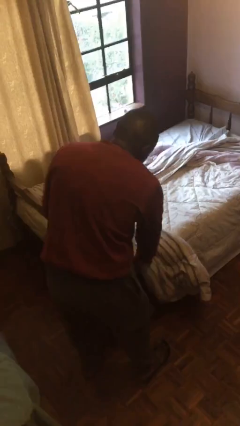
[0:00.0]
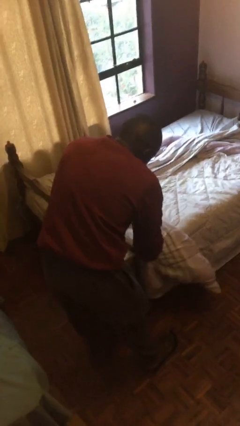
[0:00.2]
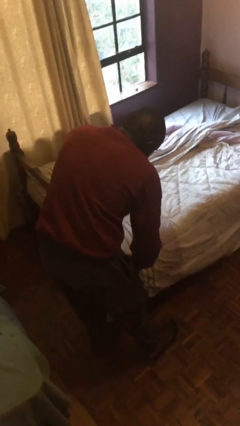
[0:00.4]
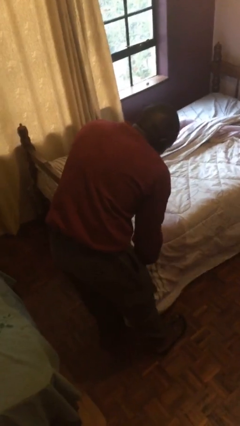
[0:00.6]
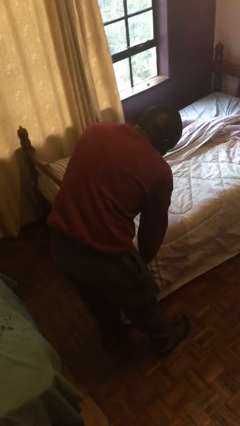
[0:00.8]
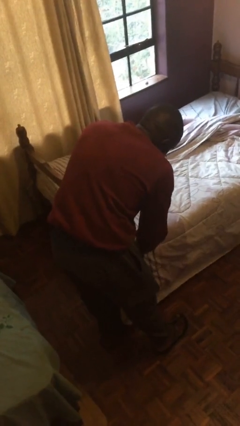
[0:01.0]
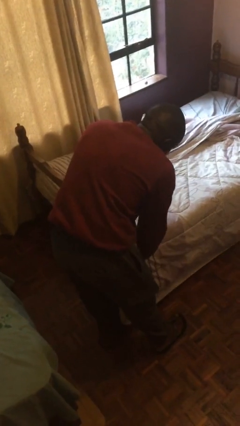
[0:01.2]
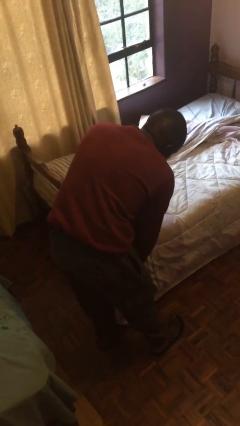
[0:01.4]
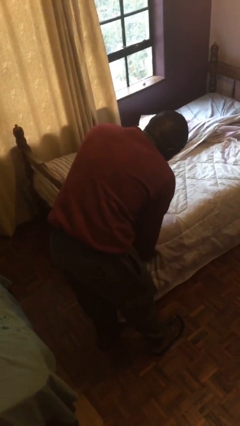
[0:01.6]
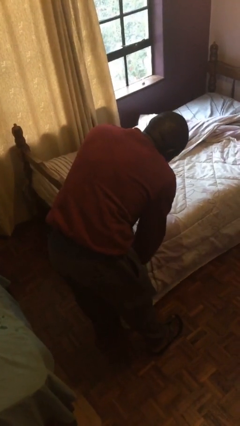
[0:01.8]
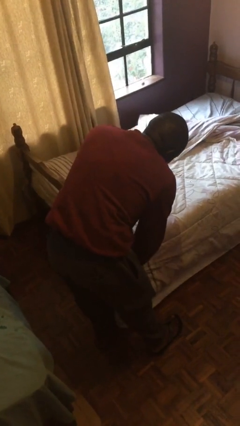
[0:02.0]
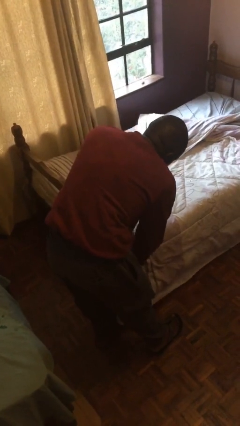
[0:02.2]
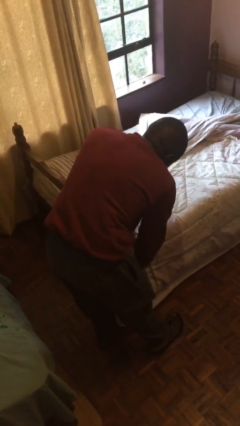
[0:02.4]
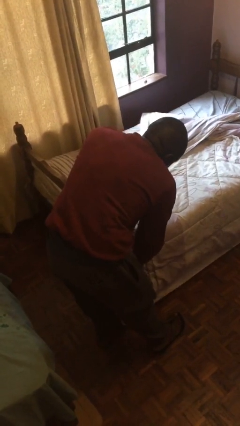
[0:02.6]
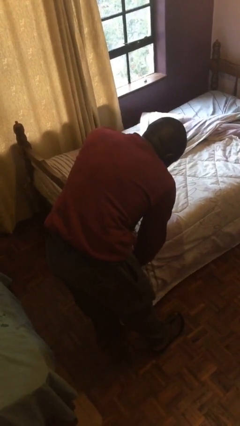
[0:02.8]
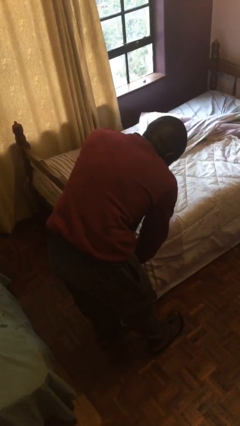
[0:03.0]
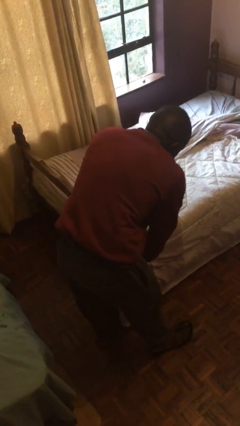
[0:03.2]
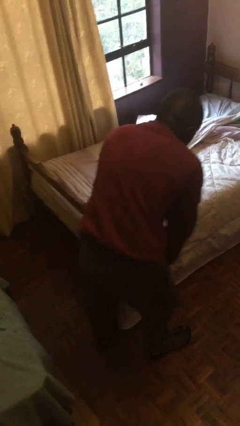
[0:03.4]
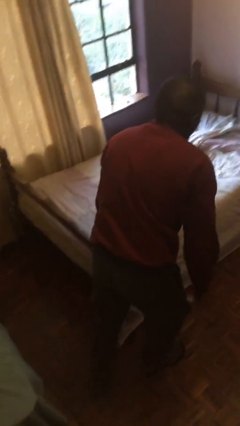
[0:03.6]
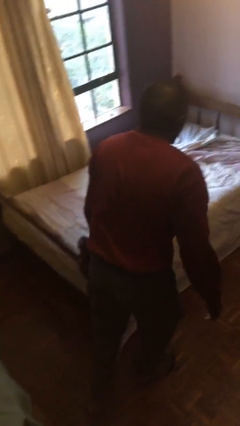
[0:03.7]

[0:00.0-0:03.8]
person makes bed

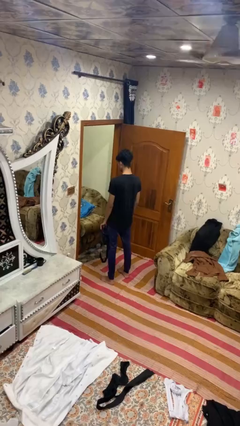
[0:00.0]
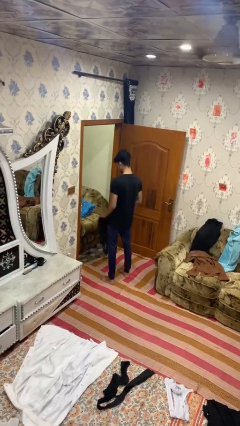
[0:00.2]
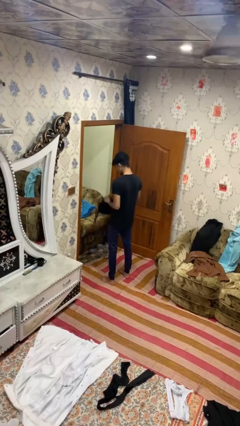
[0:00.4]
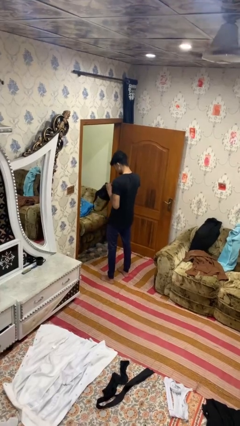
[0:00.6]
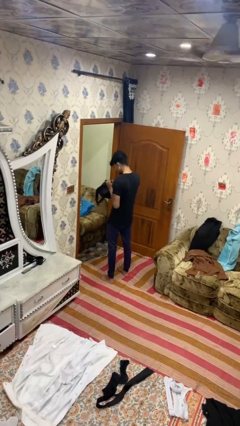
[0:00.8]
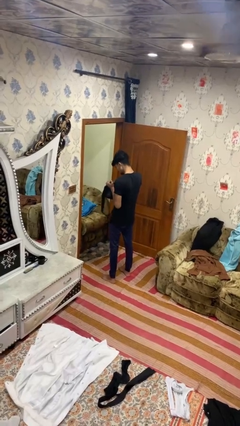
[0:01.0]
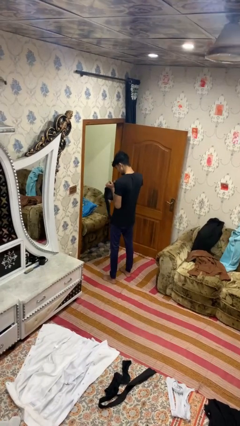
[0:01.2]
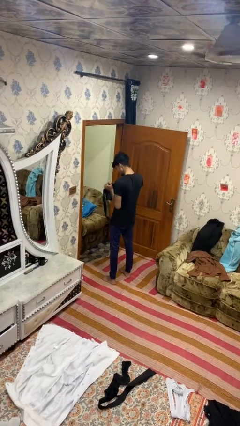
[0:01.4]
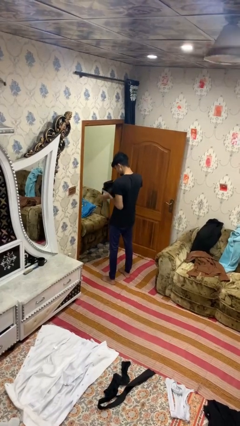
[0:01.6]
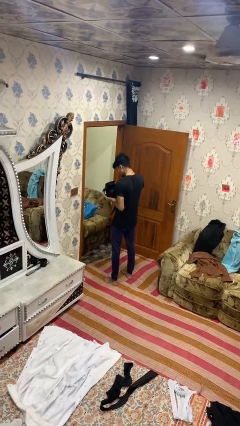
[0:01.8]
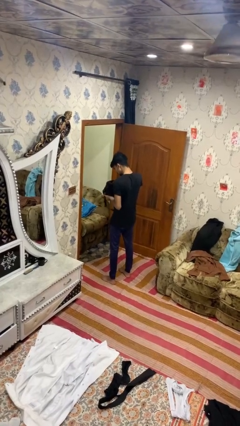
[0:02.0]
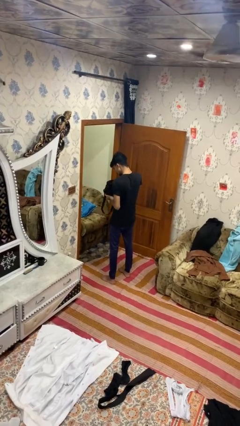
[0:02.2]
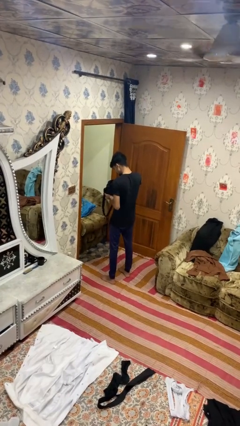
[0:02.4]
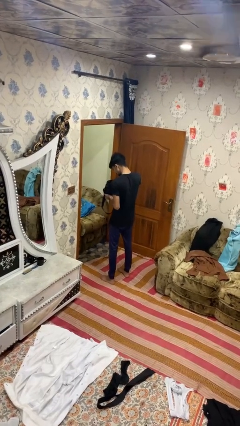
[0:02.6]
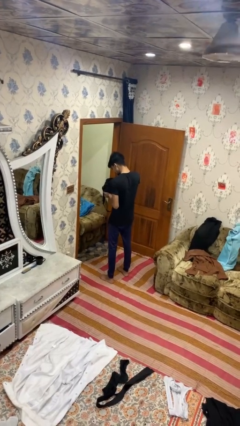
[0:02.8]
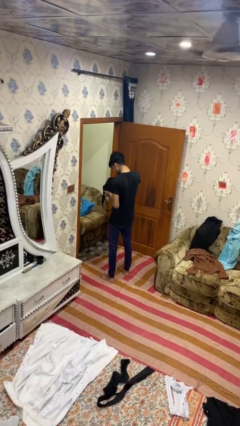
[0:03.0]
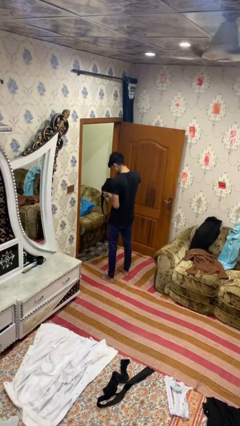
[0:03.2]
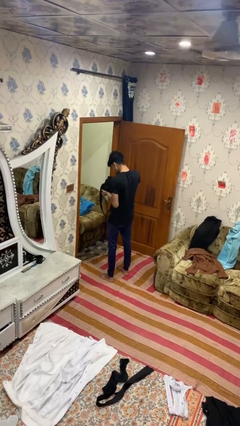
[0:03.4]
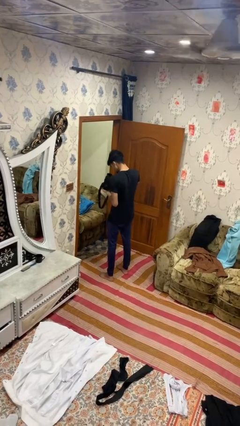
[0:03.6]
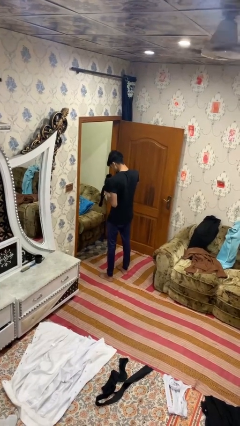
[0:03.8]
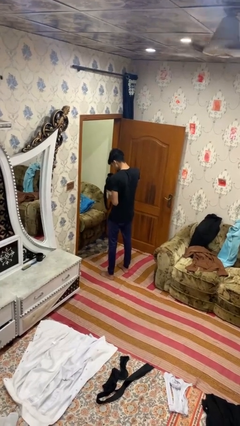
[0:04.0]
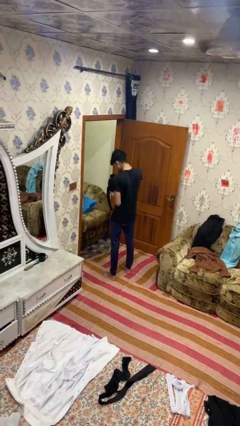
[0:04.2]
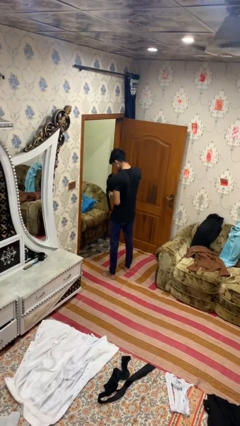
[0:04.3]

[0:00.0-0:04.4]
person searches in bag

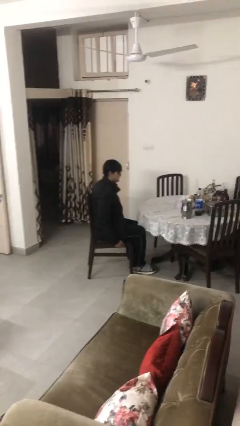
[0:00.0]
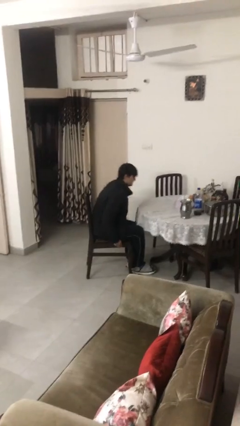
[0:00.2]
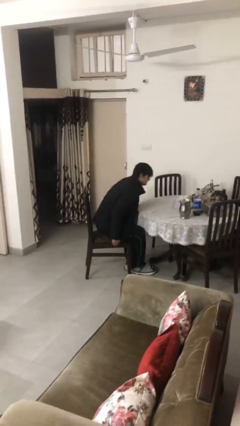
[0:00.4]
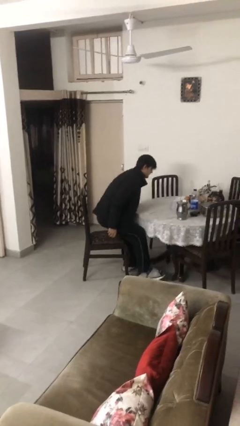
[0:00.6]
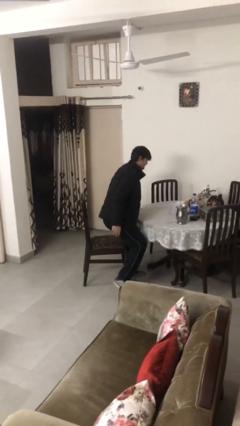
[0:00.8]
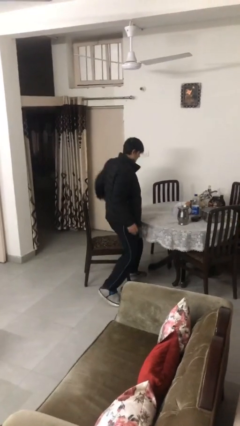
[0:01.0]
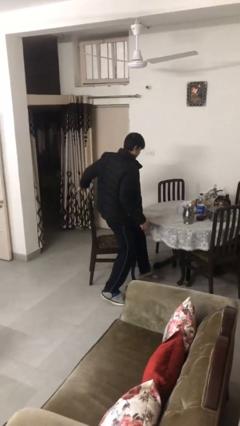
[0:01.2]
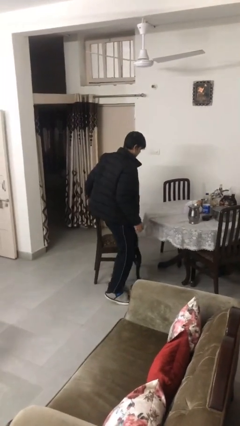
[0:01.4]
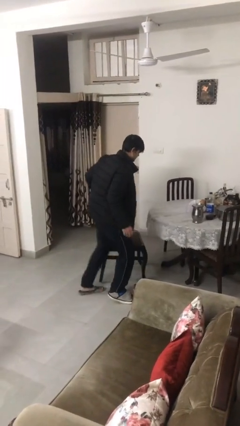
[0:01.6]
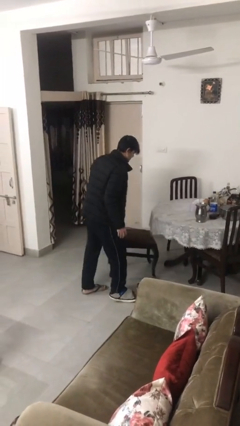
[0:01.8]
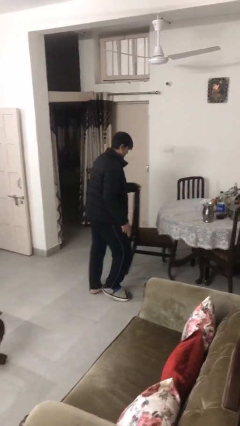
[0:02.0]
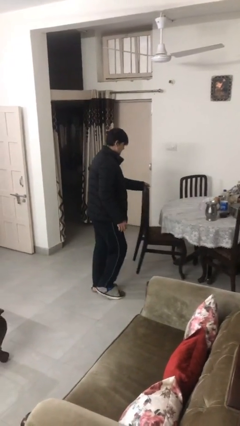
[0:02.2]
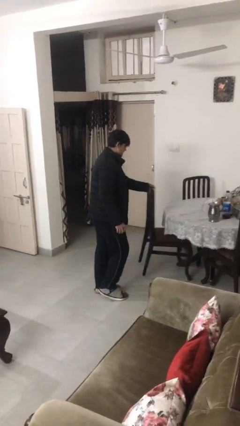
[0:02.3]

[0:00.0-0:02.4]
person stands up

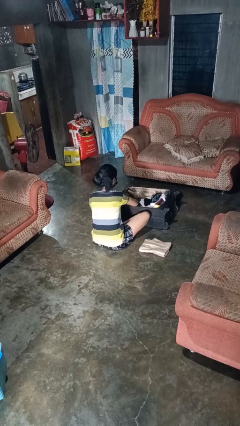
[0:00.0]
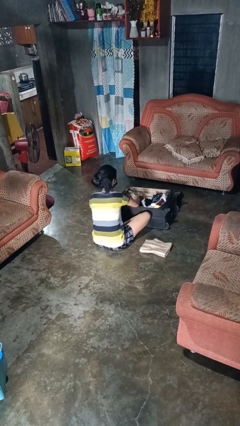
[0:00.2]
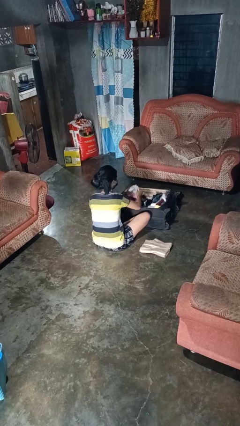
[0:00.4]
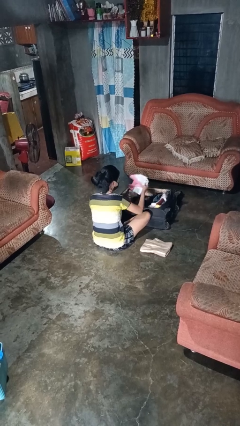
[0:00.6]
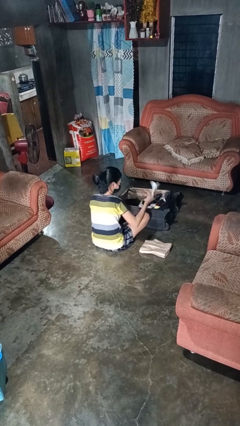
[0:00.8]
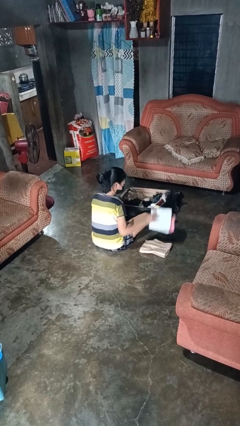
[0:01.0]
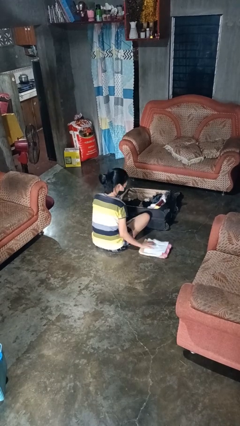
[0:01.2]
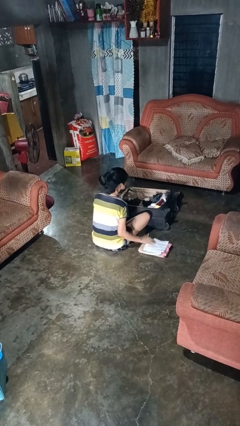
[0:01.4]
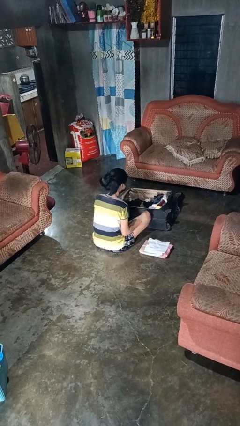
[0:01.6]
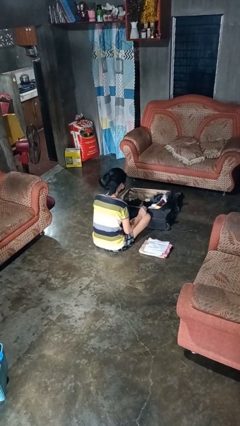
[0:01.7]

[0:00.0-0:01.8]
person unloads clothes from suitcase

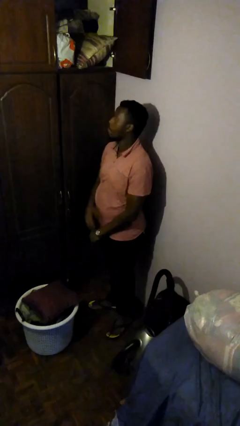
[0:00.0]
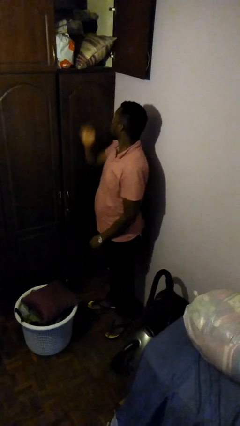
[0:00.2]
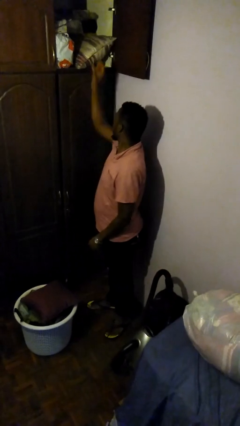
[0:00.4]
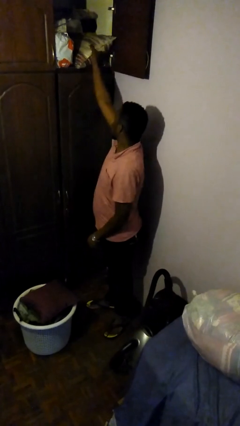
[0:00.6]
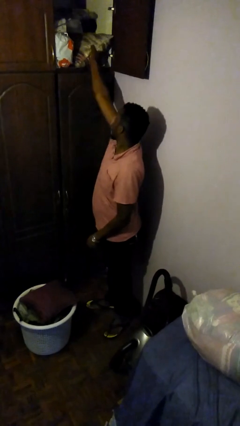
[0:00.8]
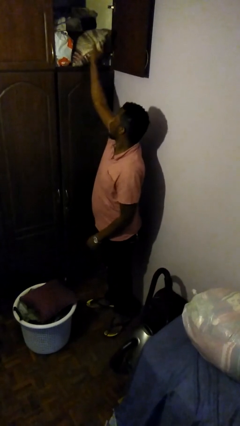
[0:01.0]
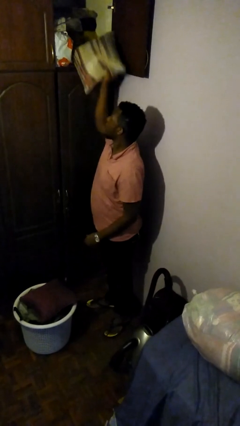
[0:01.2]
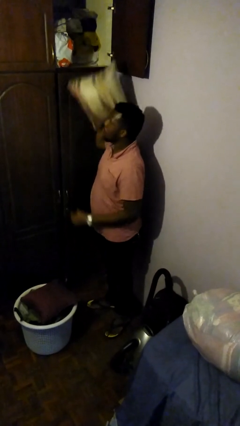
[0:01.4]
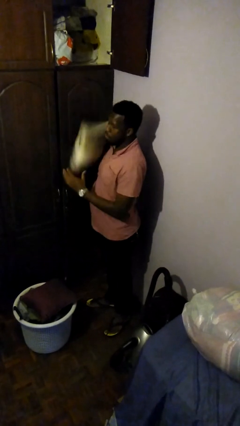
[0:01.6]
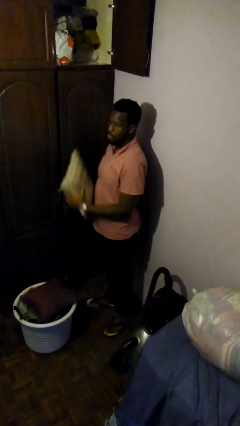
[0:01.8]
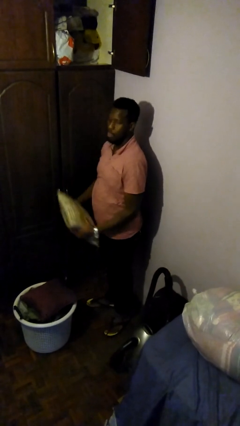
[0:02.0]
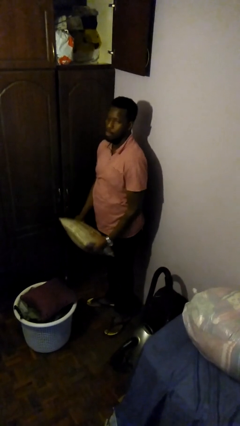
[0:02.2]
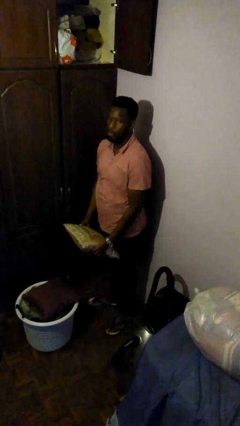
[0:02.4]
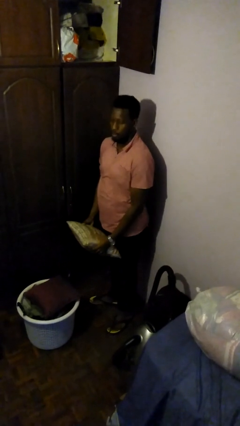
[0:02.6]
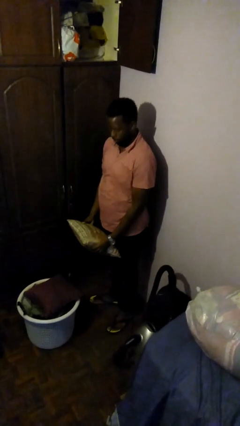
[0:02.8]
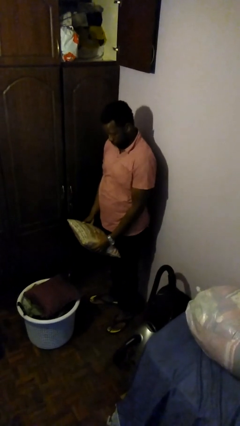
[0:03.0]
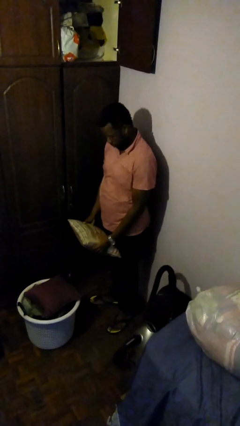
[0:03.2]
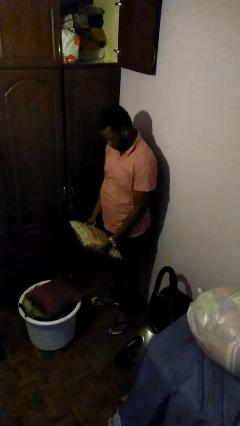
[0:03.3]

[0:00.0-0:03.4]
person picks up object from shelf

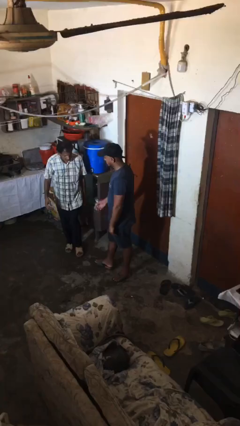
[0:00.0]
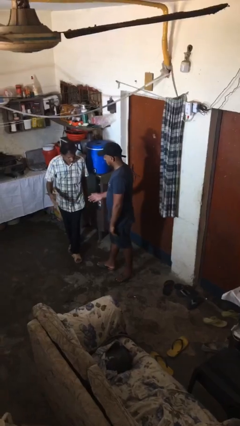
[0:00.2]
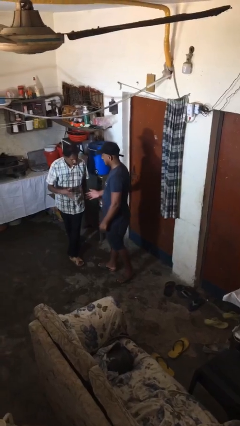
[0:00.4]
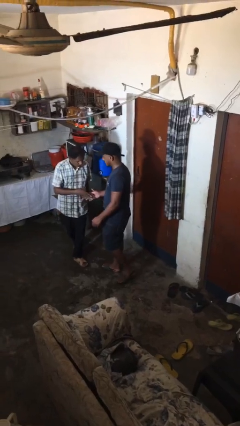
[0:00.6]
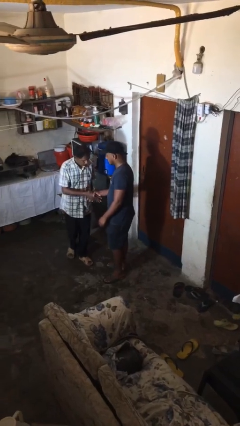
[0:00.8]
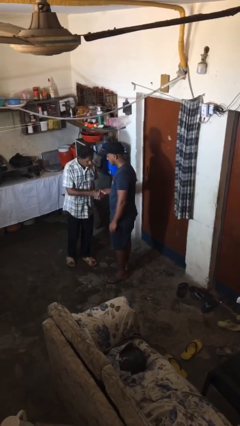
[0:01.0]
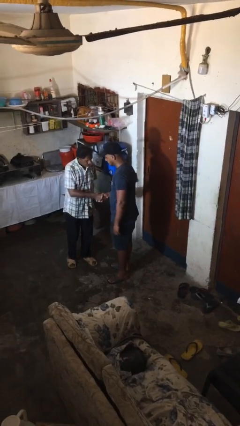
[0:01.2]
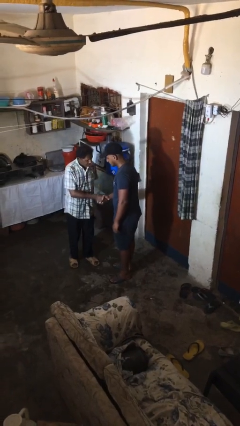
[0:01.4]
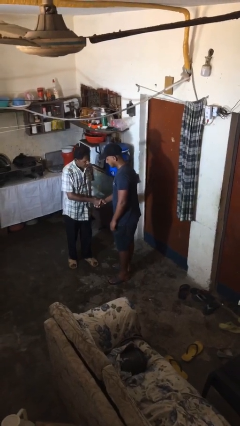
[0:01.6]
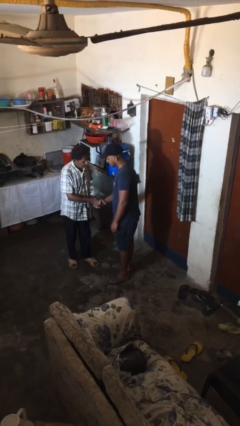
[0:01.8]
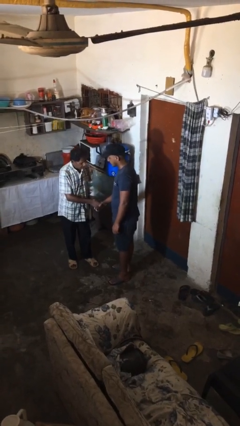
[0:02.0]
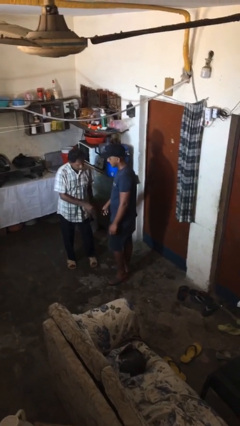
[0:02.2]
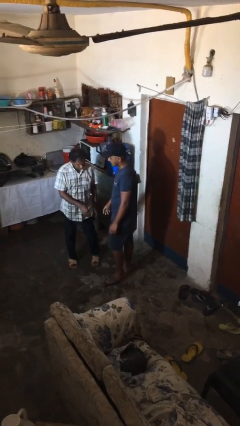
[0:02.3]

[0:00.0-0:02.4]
person shakes hand
